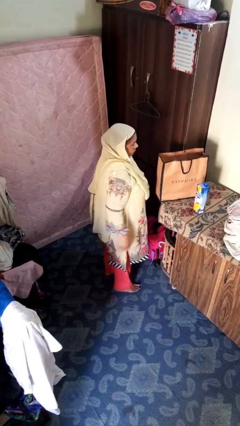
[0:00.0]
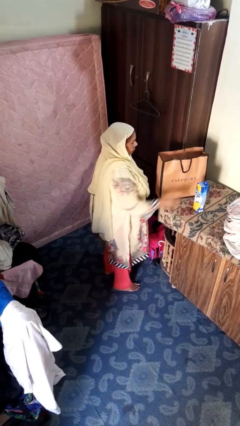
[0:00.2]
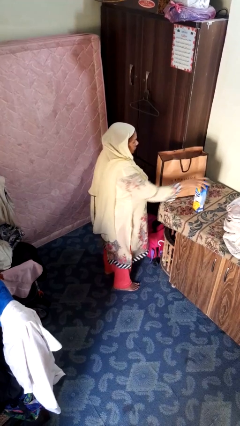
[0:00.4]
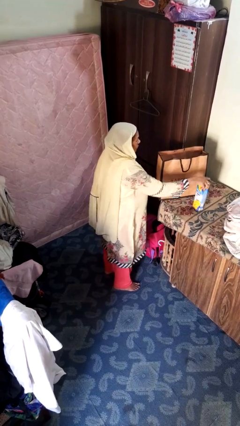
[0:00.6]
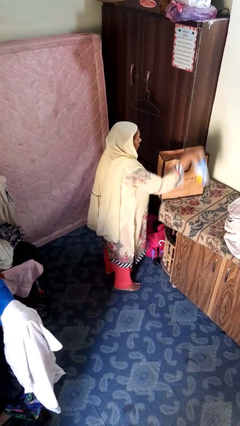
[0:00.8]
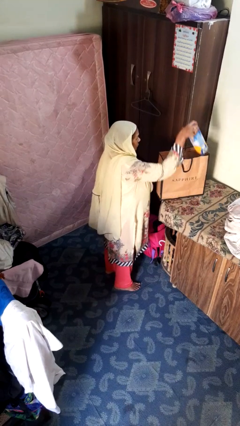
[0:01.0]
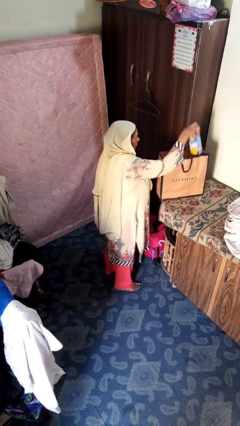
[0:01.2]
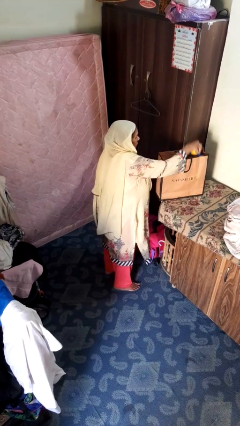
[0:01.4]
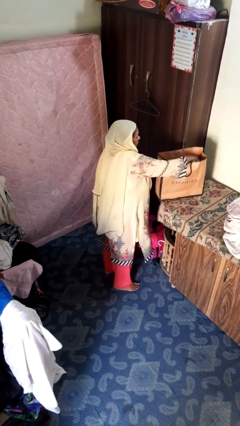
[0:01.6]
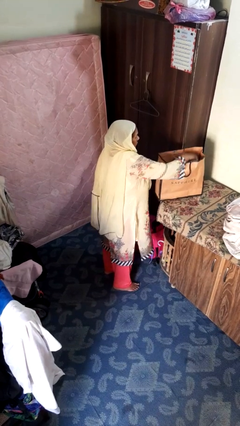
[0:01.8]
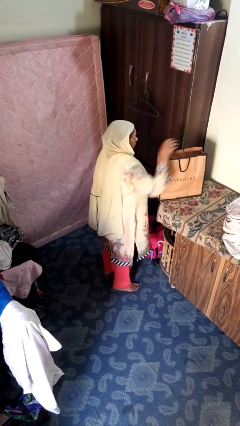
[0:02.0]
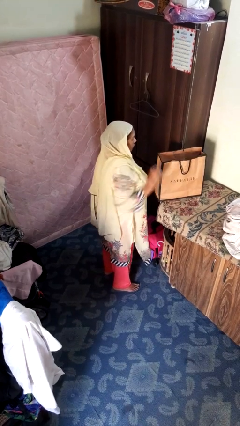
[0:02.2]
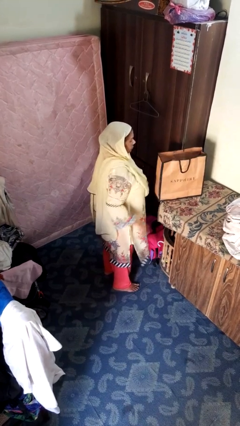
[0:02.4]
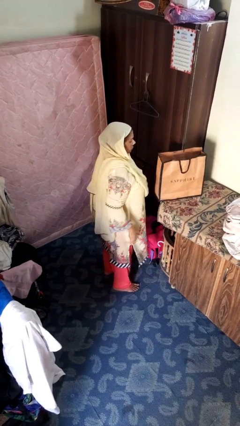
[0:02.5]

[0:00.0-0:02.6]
person puts object into bag

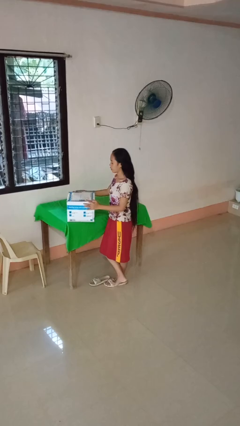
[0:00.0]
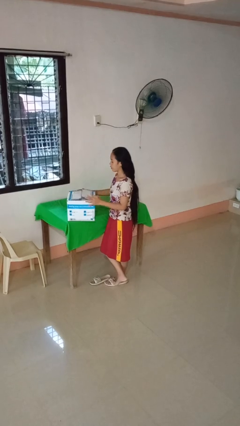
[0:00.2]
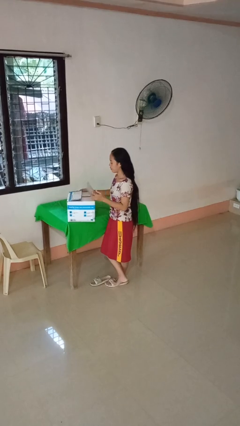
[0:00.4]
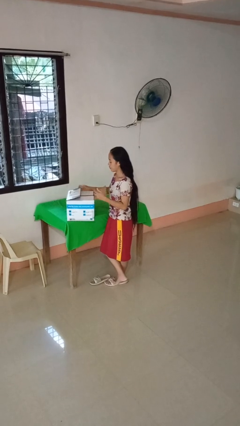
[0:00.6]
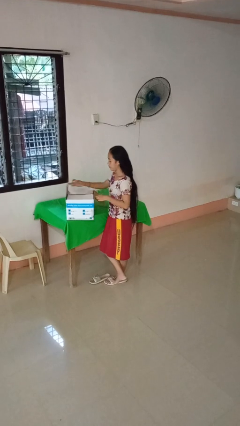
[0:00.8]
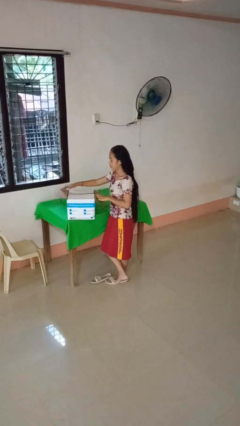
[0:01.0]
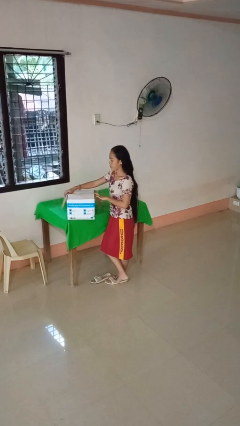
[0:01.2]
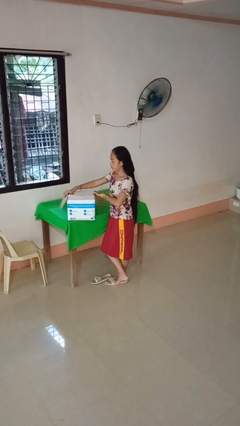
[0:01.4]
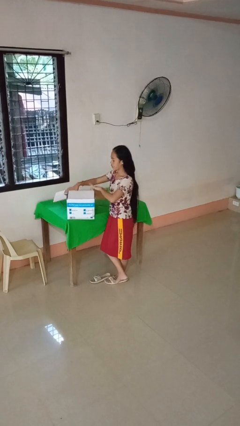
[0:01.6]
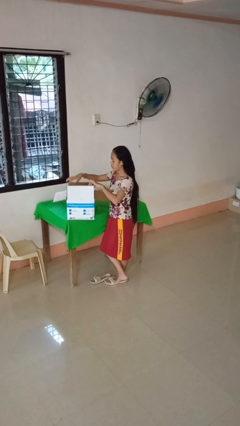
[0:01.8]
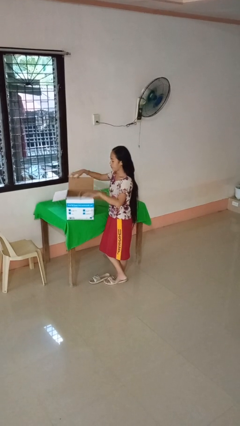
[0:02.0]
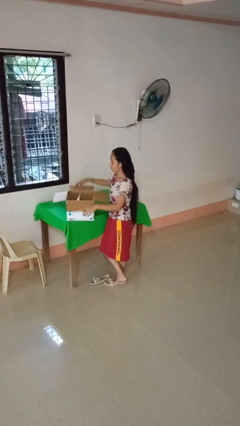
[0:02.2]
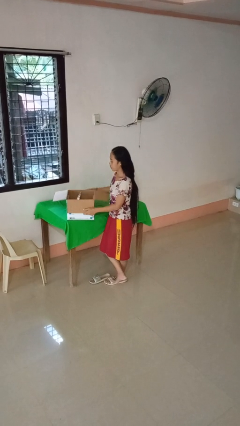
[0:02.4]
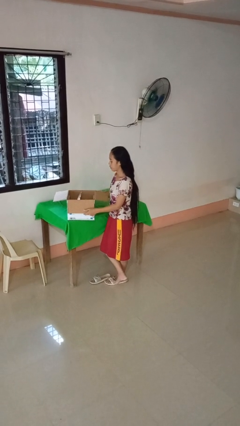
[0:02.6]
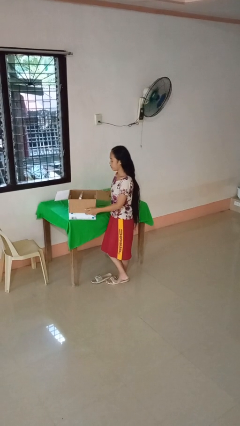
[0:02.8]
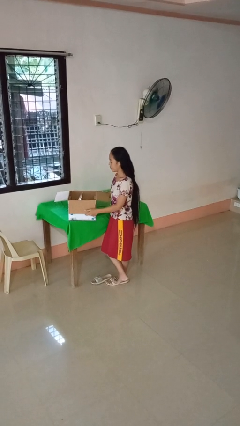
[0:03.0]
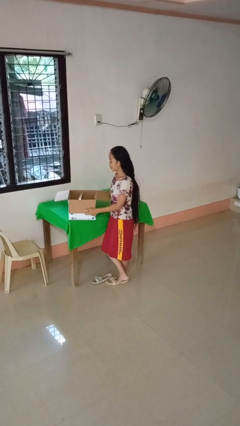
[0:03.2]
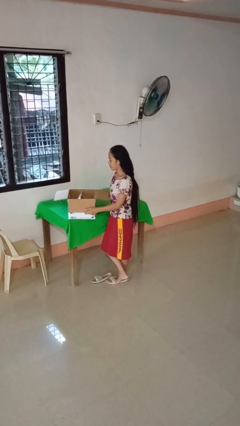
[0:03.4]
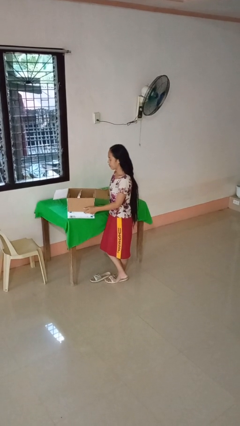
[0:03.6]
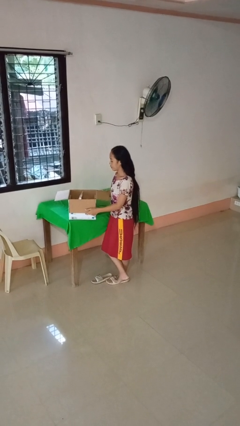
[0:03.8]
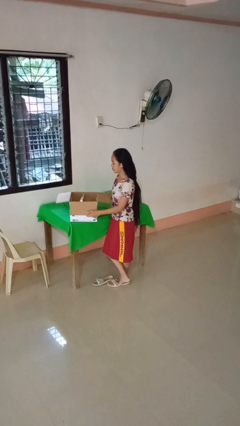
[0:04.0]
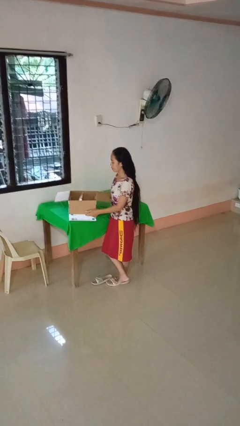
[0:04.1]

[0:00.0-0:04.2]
person opens box

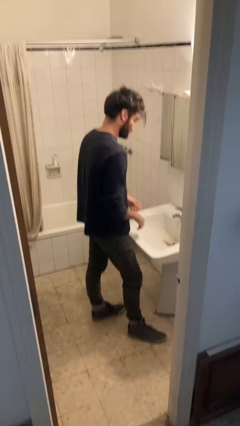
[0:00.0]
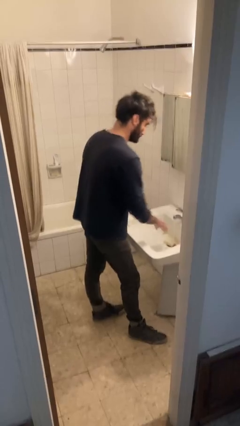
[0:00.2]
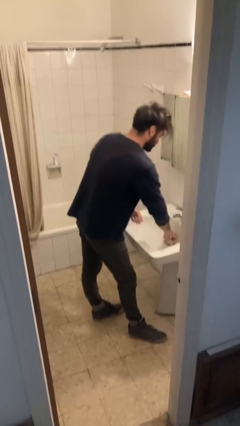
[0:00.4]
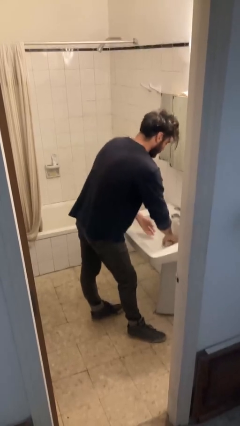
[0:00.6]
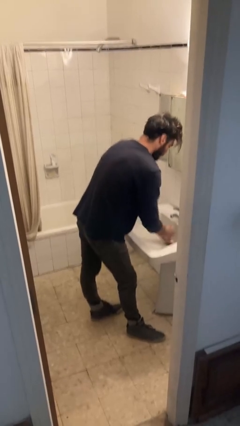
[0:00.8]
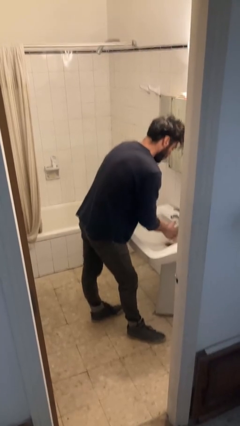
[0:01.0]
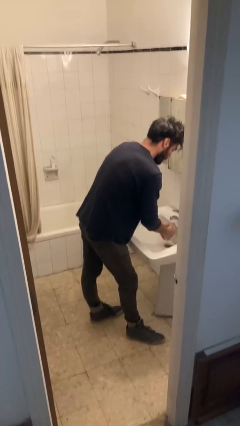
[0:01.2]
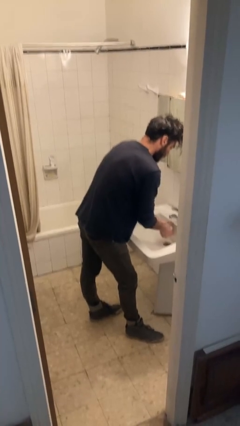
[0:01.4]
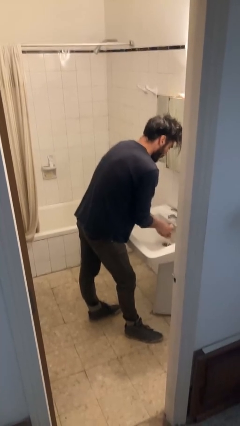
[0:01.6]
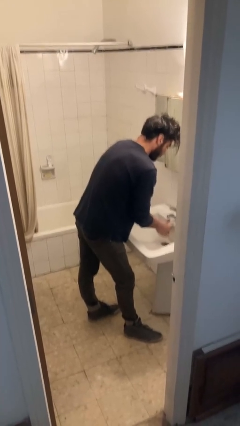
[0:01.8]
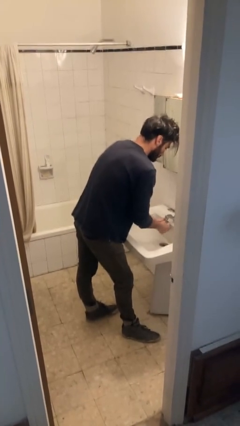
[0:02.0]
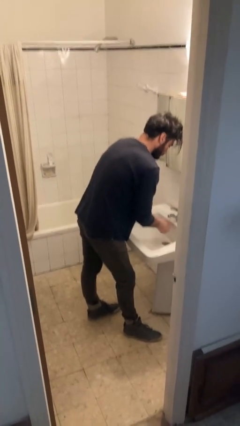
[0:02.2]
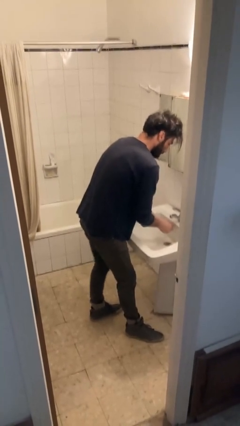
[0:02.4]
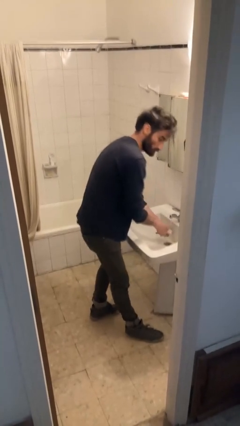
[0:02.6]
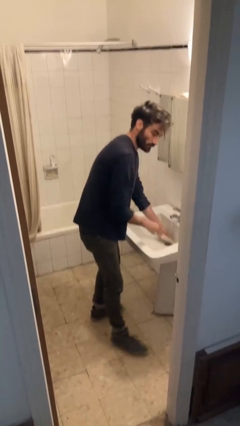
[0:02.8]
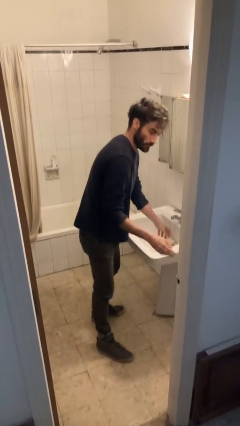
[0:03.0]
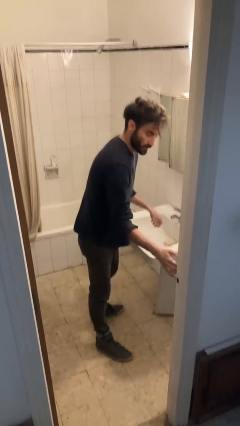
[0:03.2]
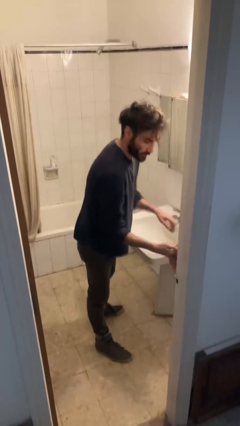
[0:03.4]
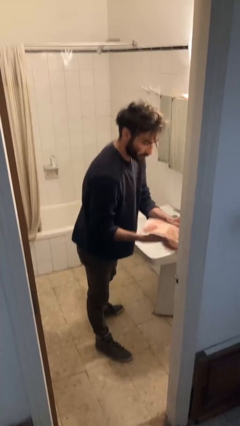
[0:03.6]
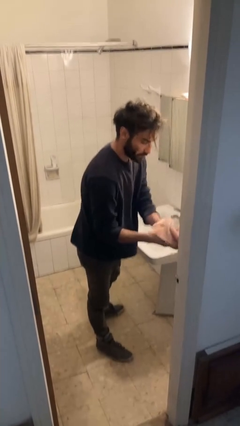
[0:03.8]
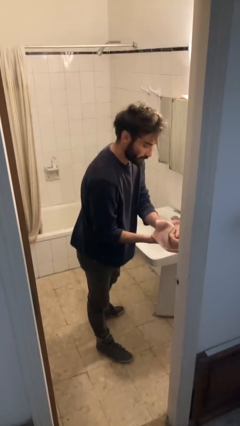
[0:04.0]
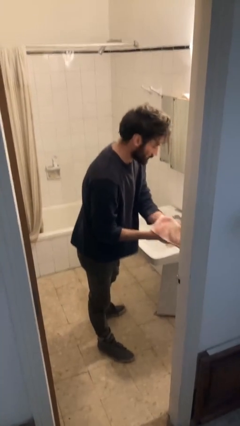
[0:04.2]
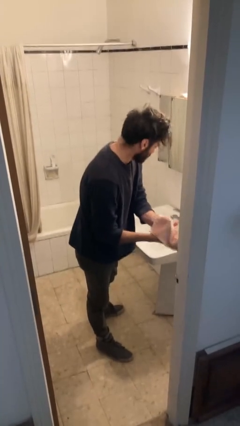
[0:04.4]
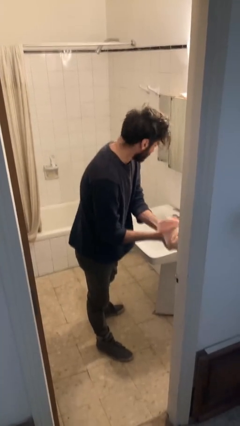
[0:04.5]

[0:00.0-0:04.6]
person washes hands

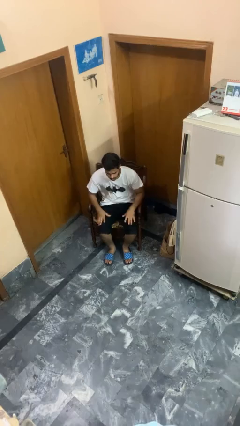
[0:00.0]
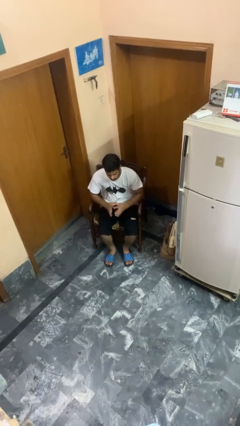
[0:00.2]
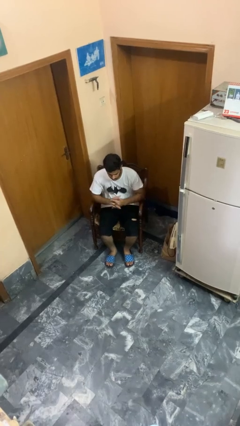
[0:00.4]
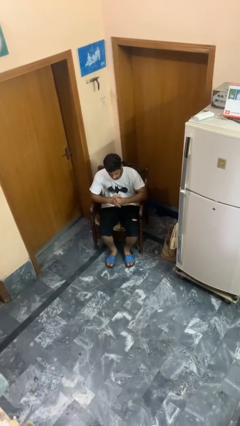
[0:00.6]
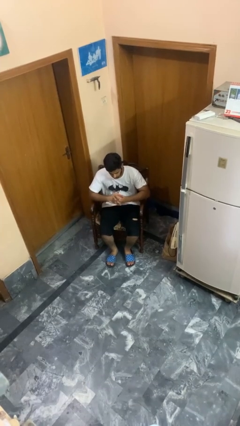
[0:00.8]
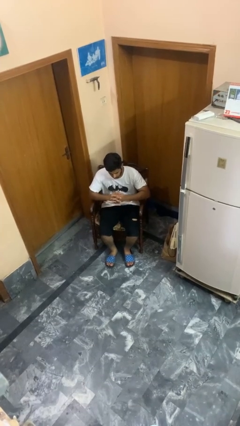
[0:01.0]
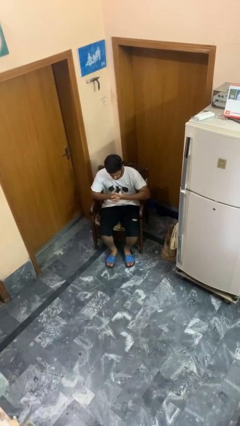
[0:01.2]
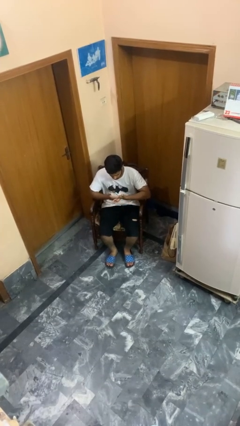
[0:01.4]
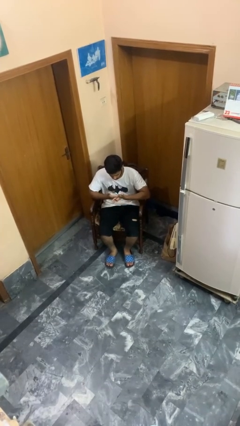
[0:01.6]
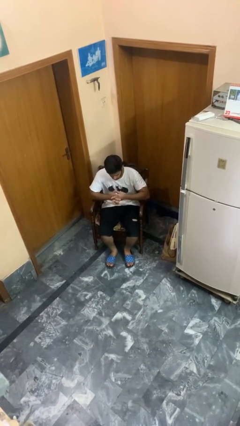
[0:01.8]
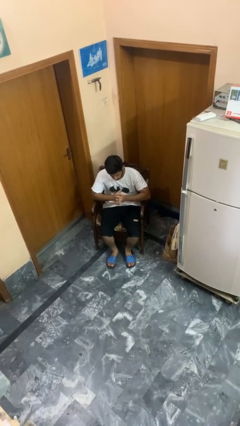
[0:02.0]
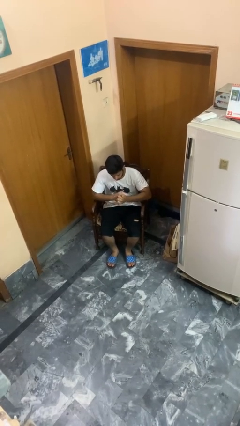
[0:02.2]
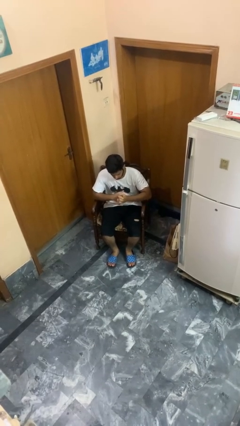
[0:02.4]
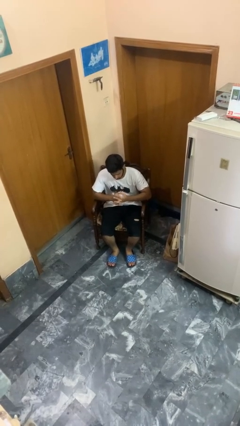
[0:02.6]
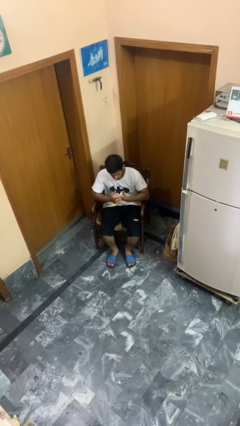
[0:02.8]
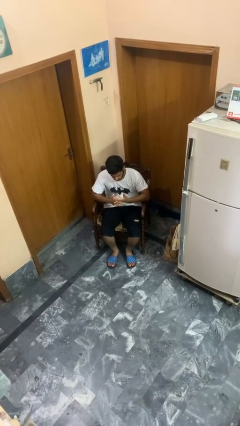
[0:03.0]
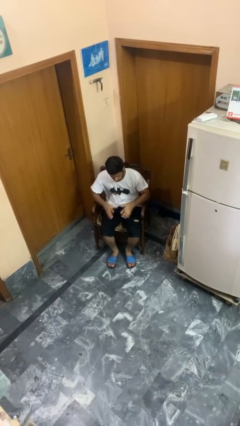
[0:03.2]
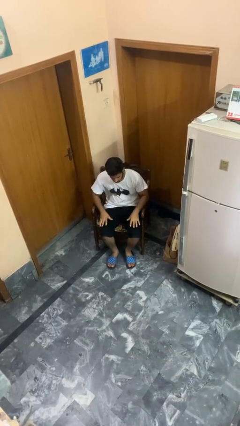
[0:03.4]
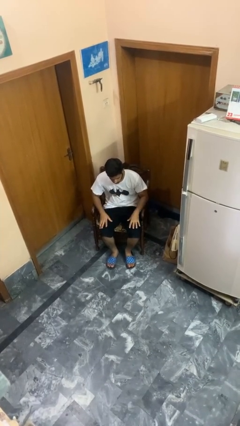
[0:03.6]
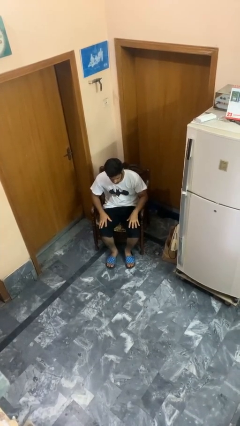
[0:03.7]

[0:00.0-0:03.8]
person cracks knuckles

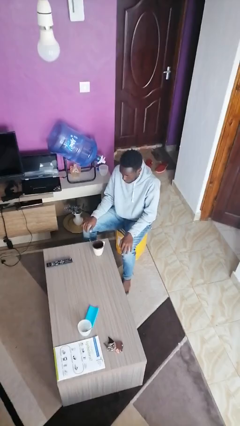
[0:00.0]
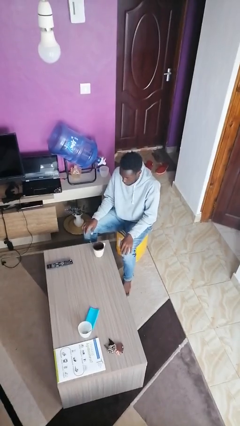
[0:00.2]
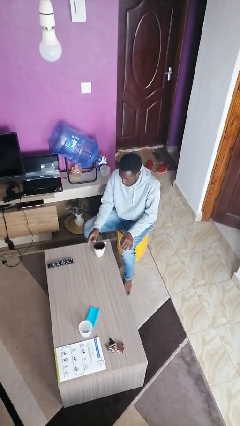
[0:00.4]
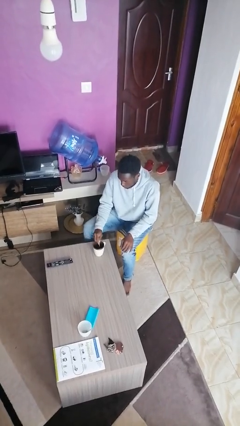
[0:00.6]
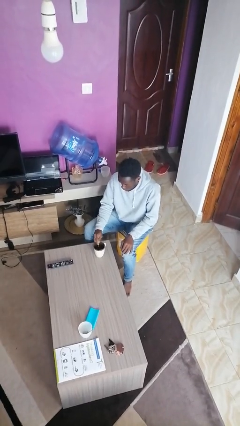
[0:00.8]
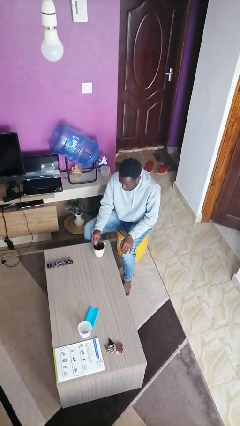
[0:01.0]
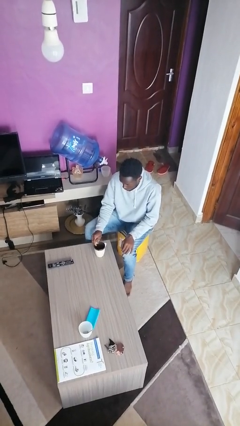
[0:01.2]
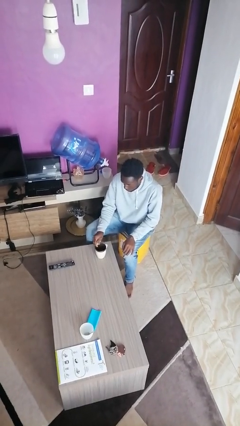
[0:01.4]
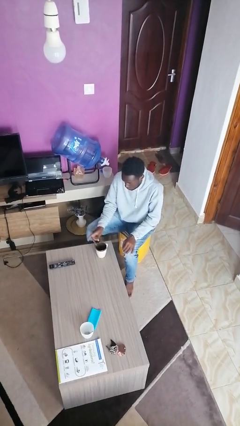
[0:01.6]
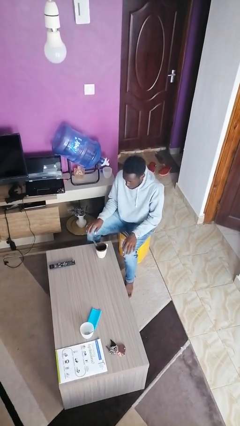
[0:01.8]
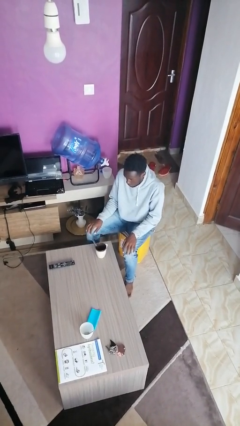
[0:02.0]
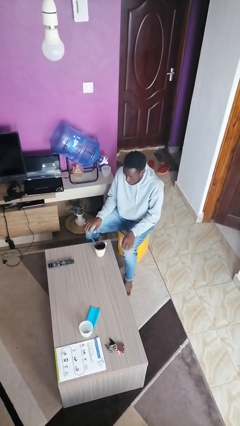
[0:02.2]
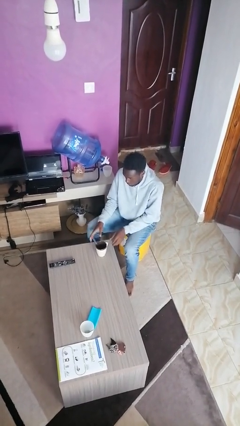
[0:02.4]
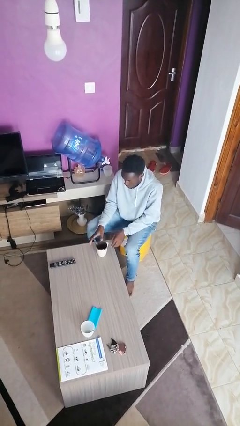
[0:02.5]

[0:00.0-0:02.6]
person stirs mug
